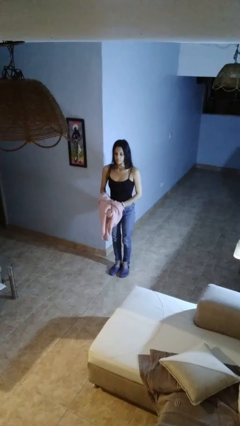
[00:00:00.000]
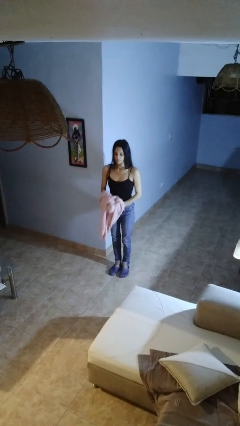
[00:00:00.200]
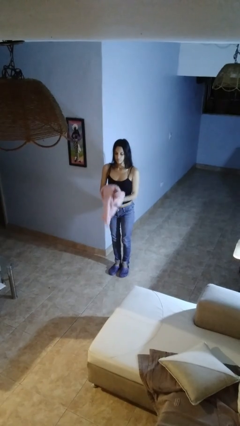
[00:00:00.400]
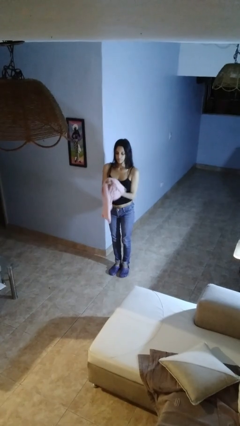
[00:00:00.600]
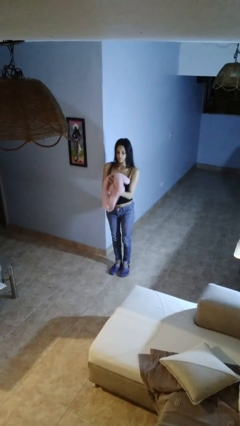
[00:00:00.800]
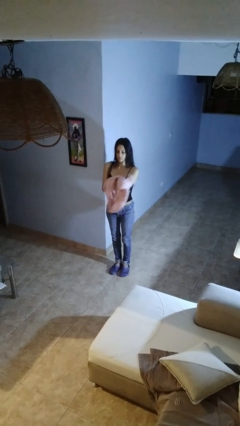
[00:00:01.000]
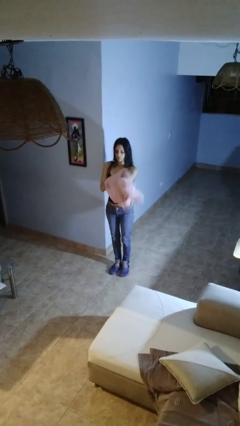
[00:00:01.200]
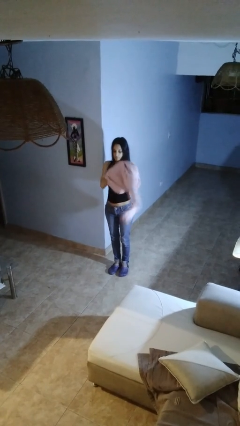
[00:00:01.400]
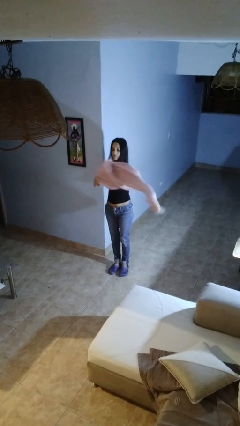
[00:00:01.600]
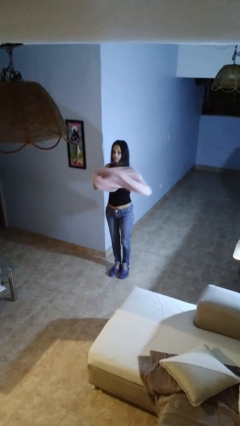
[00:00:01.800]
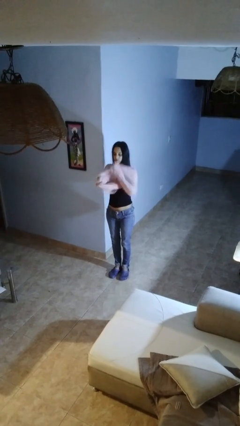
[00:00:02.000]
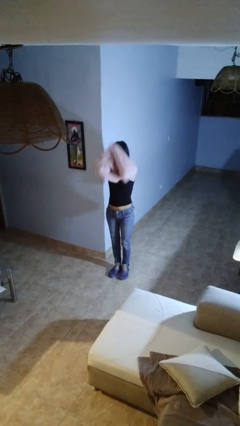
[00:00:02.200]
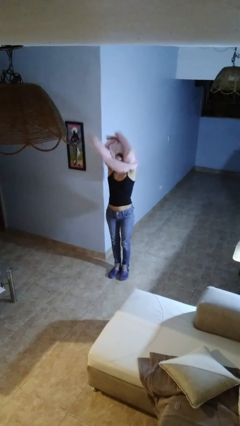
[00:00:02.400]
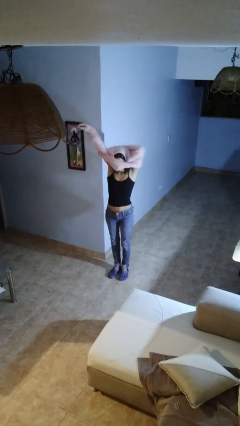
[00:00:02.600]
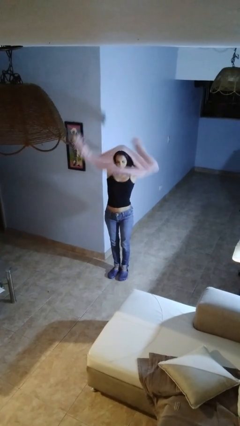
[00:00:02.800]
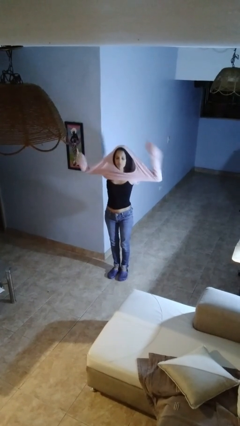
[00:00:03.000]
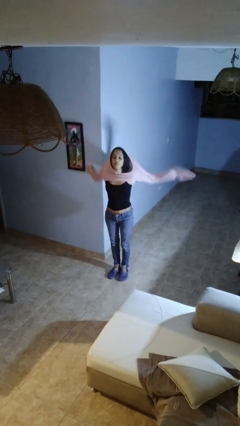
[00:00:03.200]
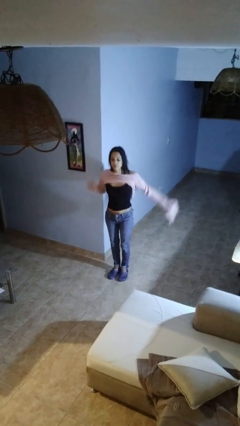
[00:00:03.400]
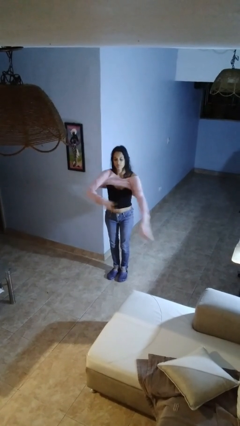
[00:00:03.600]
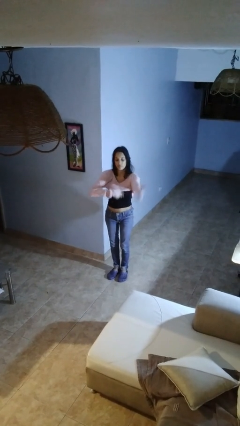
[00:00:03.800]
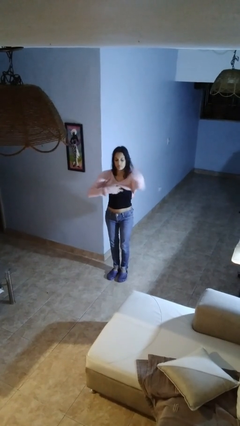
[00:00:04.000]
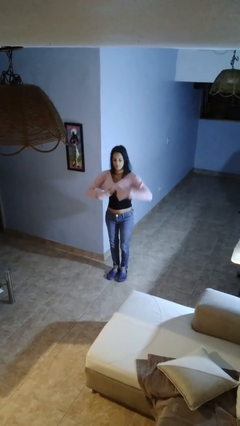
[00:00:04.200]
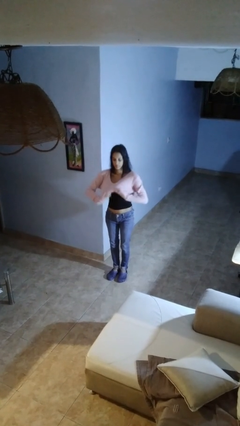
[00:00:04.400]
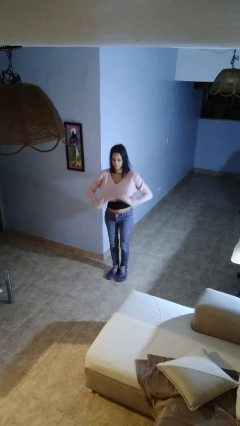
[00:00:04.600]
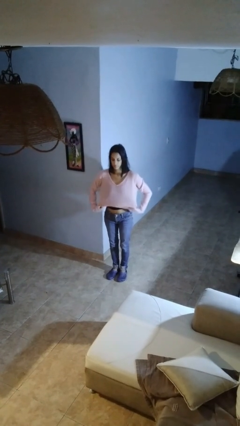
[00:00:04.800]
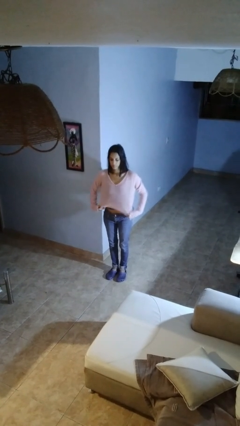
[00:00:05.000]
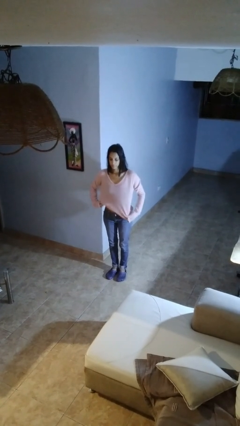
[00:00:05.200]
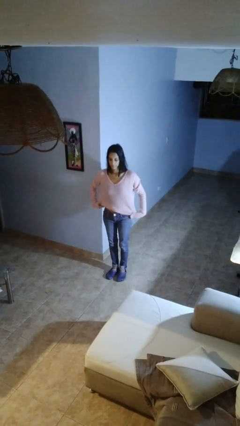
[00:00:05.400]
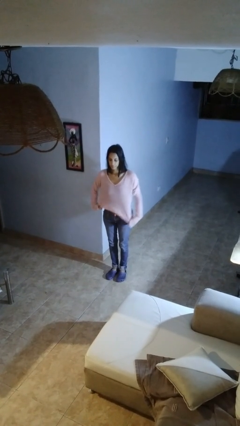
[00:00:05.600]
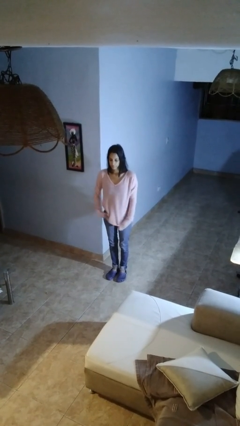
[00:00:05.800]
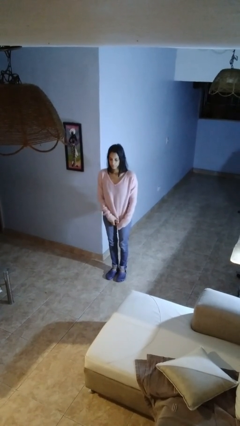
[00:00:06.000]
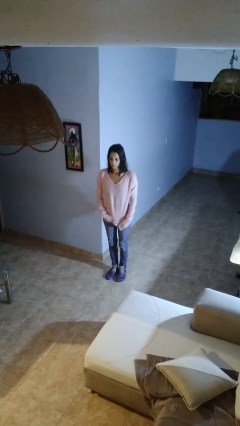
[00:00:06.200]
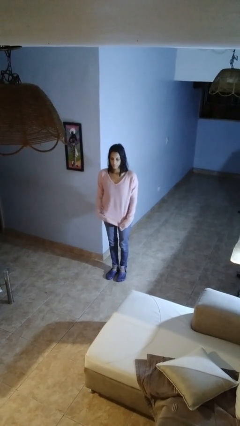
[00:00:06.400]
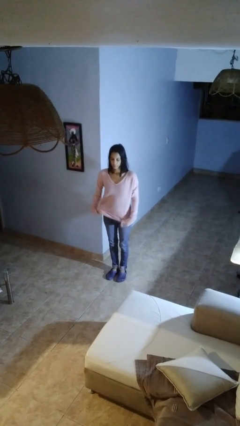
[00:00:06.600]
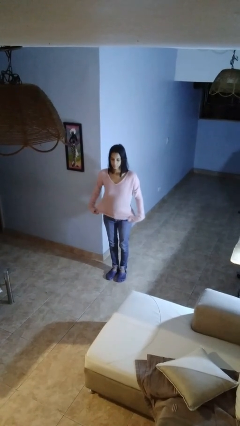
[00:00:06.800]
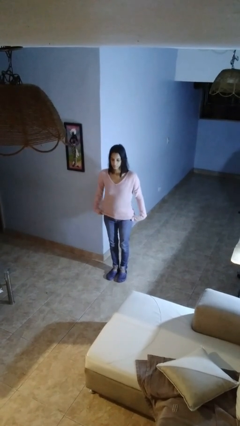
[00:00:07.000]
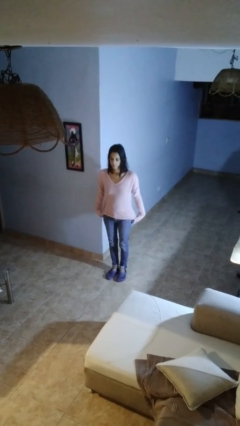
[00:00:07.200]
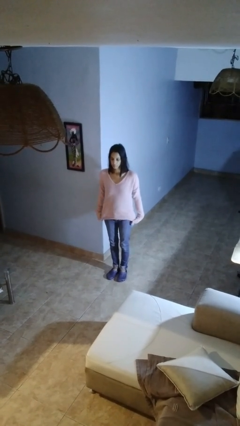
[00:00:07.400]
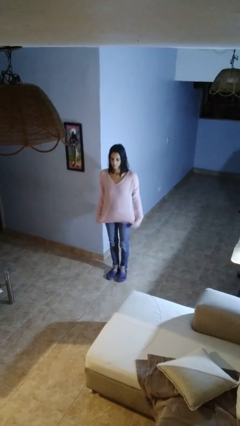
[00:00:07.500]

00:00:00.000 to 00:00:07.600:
person puts on shirt

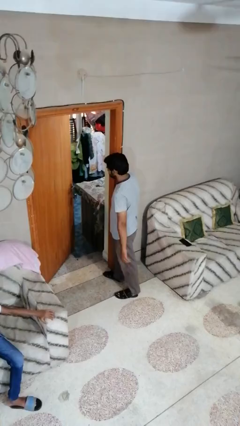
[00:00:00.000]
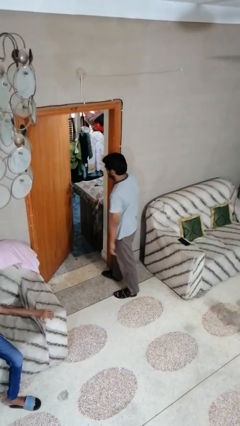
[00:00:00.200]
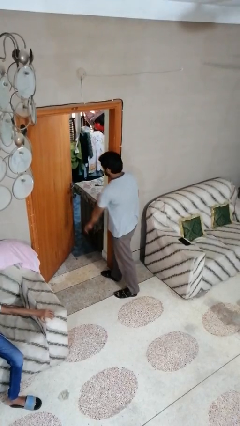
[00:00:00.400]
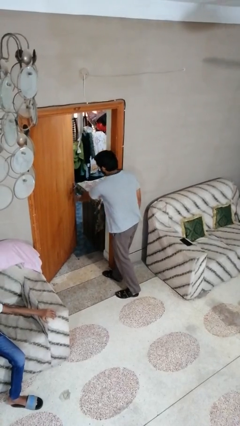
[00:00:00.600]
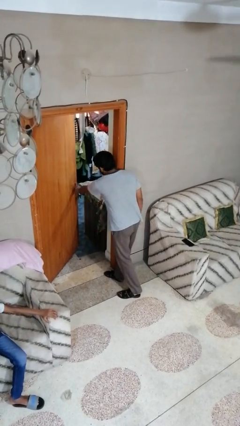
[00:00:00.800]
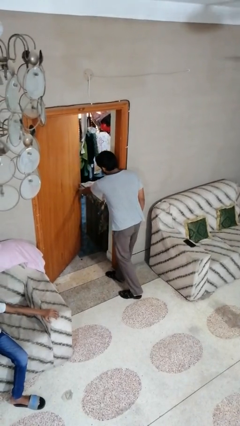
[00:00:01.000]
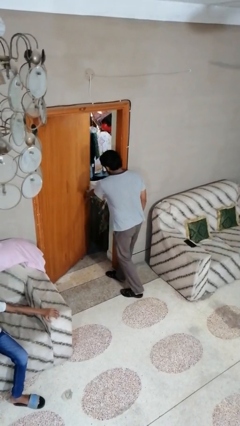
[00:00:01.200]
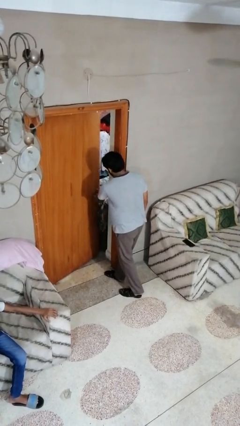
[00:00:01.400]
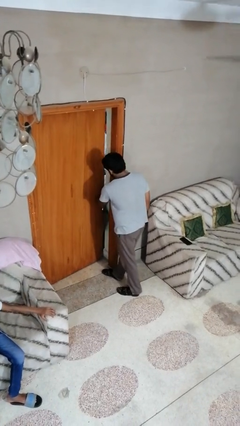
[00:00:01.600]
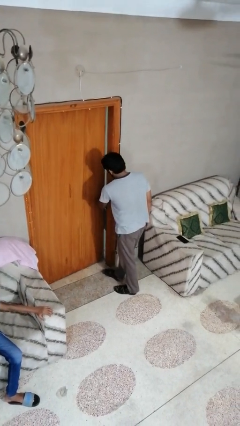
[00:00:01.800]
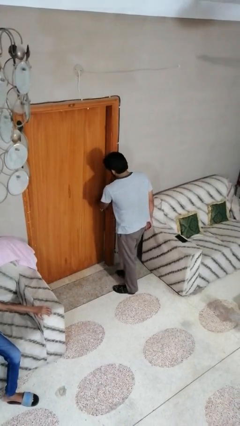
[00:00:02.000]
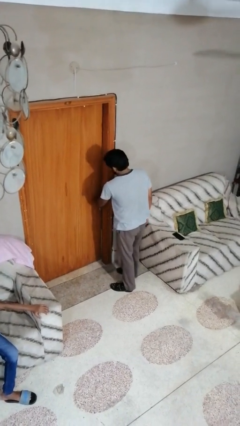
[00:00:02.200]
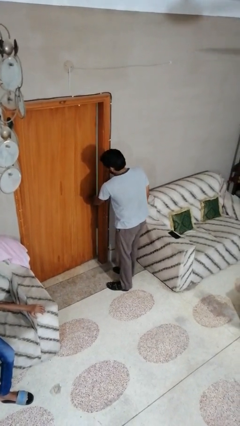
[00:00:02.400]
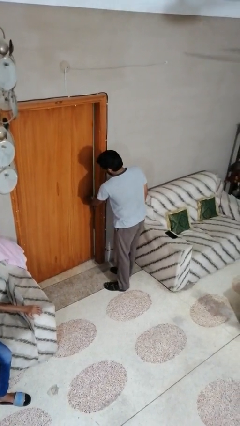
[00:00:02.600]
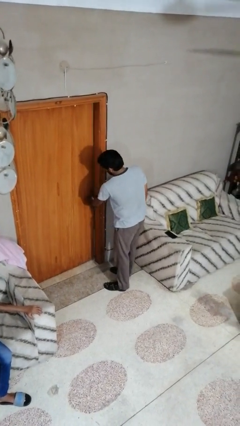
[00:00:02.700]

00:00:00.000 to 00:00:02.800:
person closes facility door

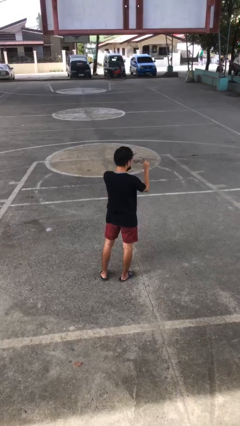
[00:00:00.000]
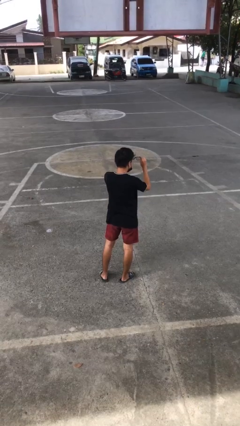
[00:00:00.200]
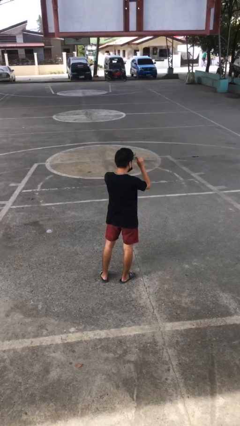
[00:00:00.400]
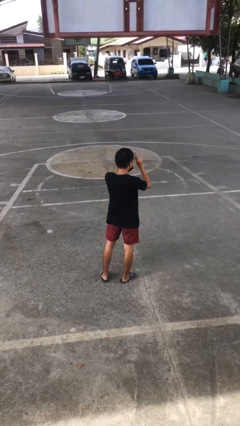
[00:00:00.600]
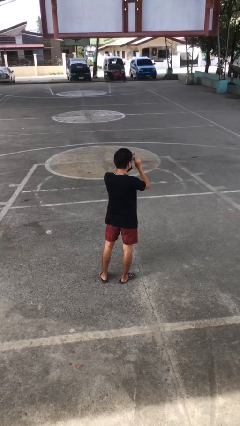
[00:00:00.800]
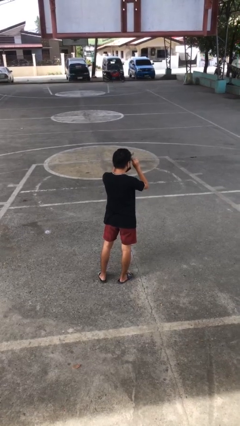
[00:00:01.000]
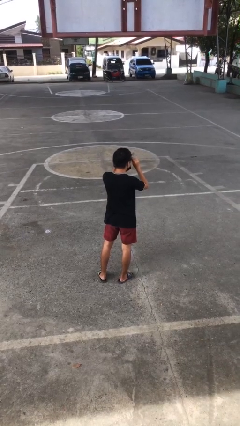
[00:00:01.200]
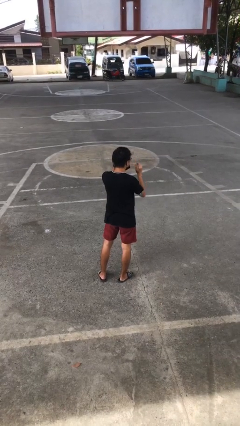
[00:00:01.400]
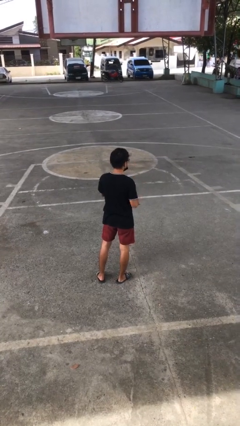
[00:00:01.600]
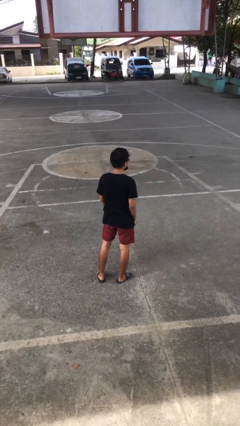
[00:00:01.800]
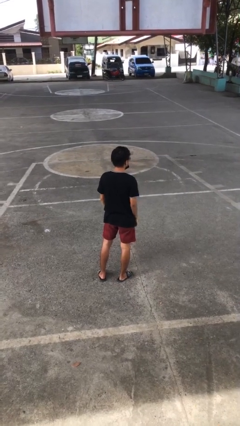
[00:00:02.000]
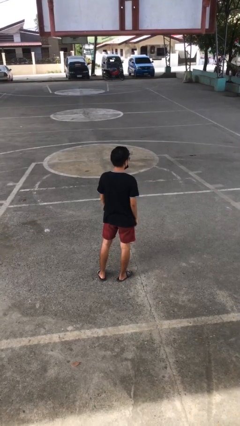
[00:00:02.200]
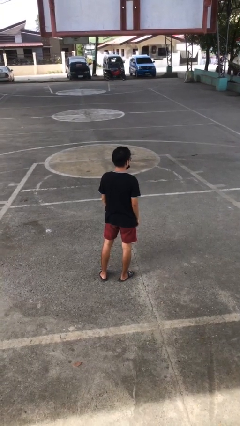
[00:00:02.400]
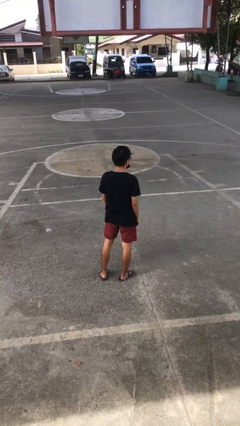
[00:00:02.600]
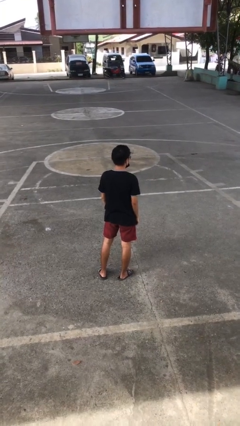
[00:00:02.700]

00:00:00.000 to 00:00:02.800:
person puts on glasses

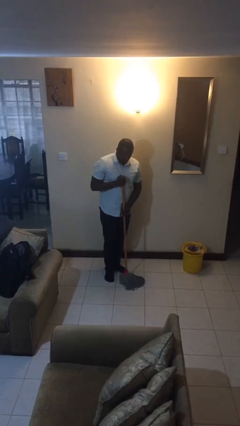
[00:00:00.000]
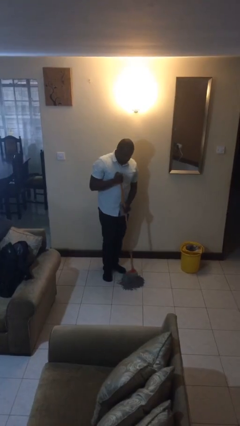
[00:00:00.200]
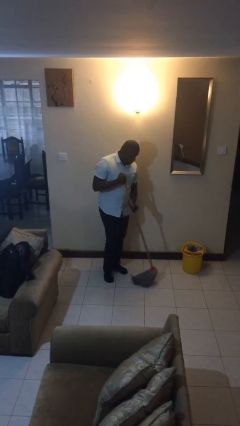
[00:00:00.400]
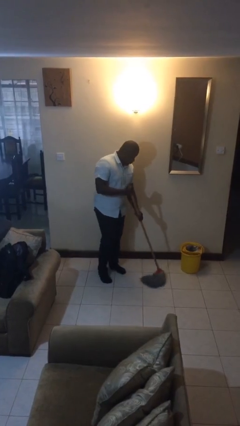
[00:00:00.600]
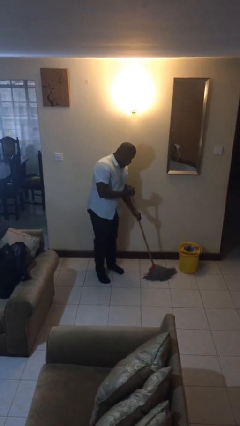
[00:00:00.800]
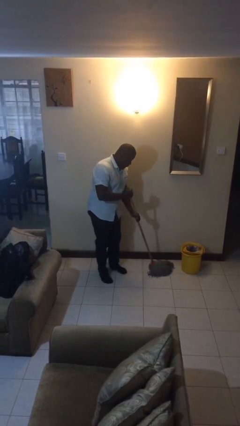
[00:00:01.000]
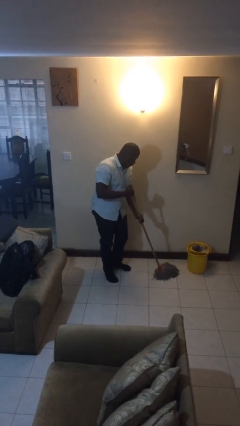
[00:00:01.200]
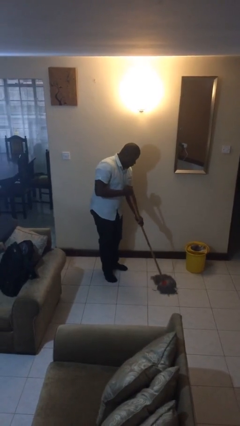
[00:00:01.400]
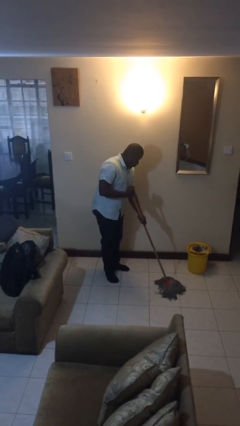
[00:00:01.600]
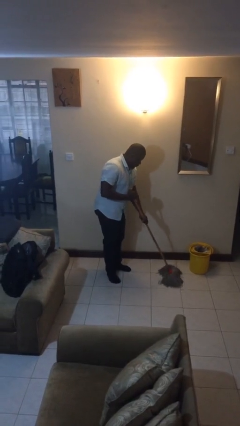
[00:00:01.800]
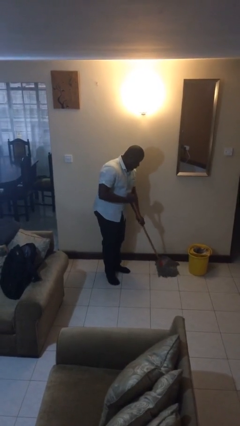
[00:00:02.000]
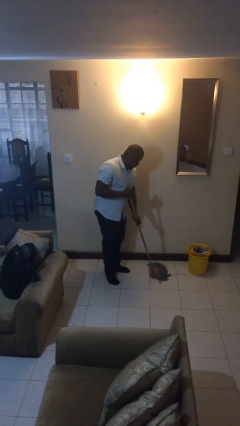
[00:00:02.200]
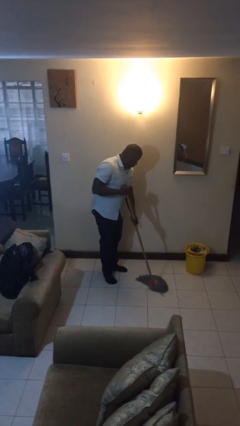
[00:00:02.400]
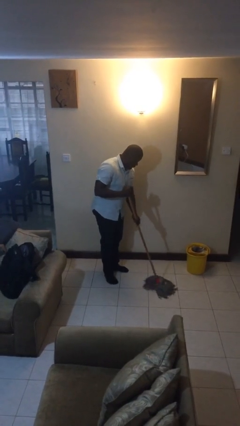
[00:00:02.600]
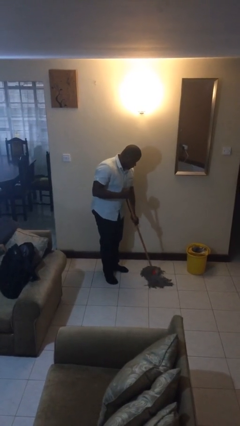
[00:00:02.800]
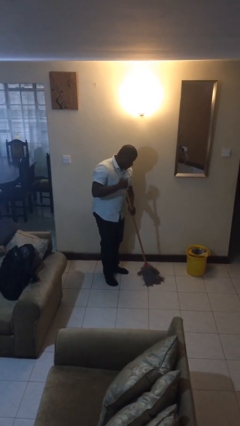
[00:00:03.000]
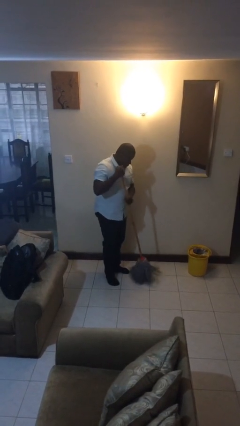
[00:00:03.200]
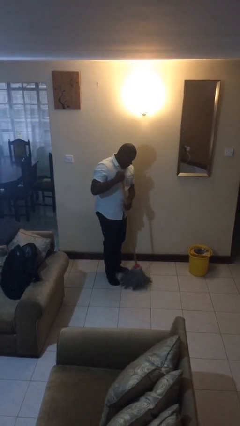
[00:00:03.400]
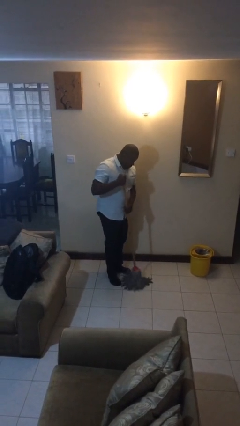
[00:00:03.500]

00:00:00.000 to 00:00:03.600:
person mops

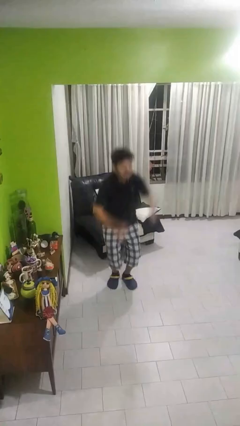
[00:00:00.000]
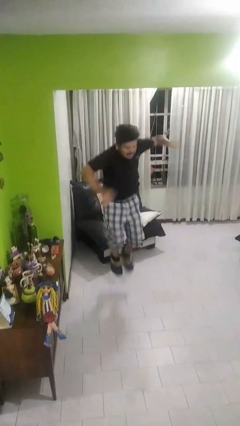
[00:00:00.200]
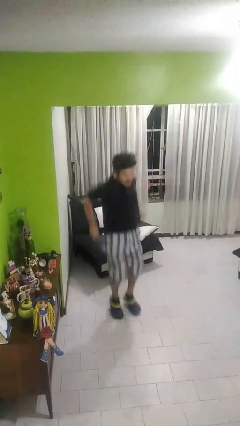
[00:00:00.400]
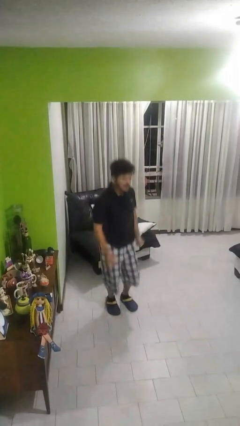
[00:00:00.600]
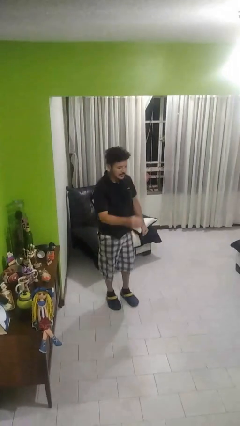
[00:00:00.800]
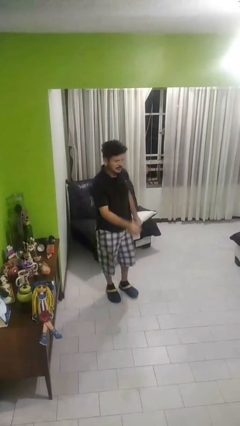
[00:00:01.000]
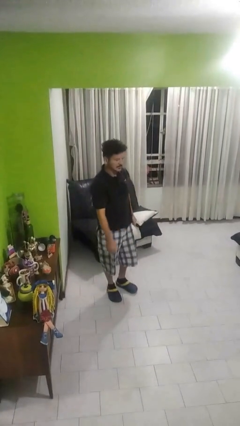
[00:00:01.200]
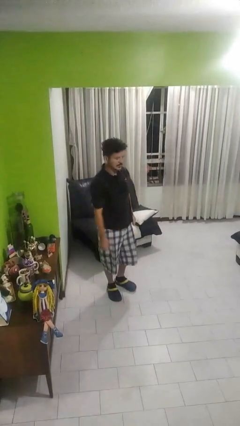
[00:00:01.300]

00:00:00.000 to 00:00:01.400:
person jumps
